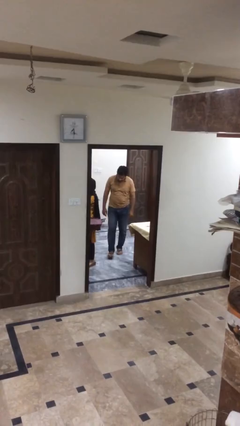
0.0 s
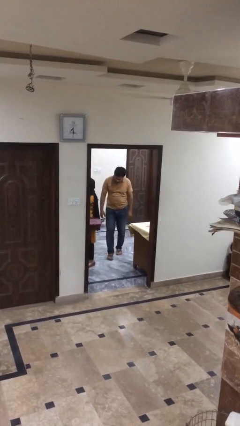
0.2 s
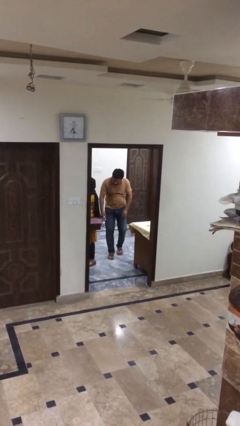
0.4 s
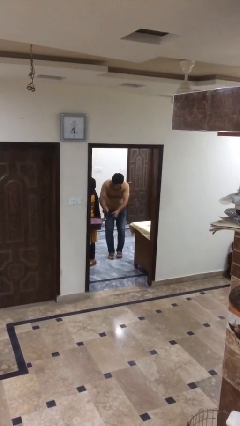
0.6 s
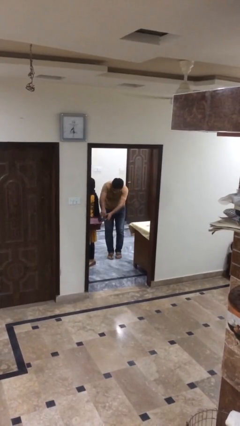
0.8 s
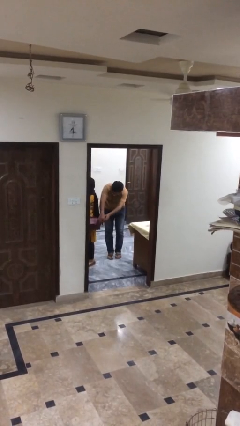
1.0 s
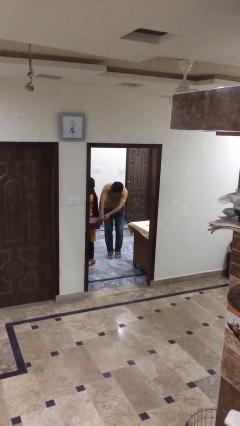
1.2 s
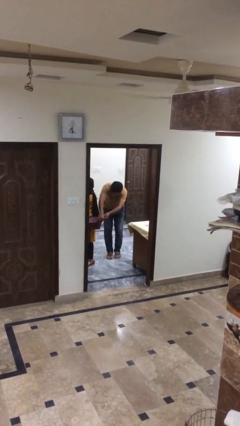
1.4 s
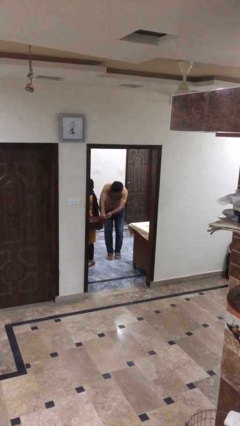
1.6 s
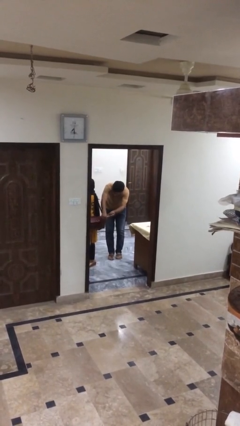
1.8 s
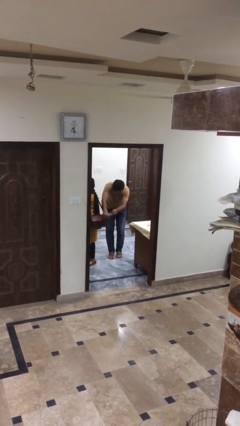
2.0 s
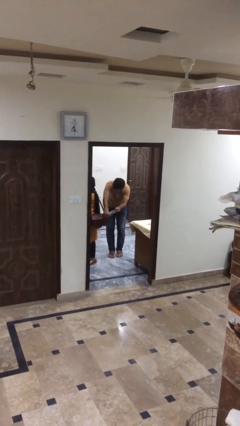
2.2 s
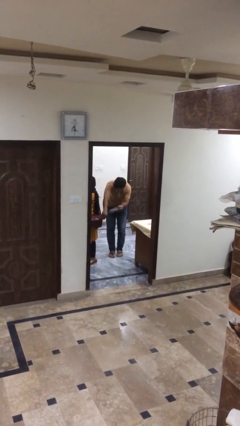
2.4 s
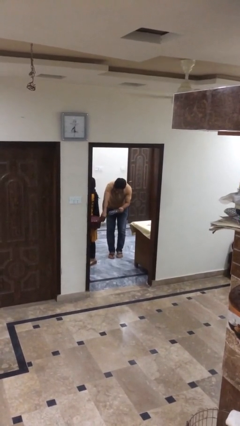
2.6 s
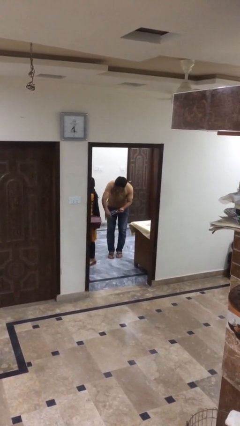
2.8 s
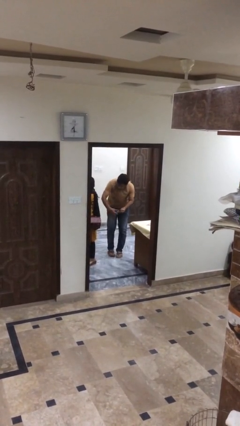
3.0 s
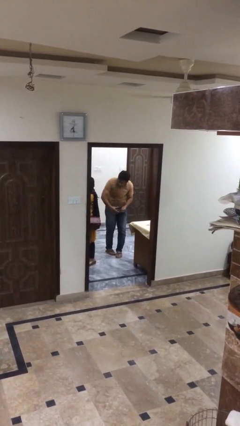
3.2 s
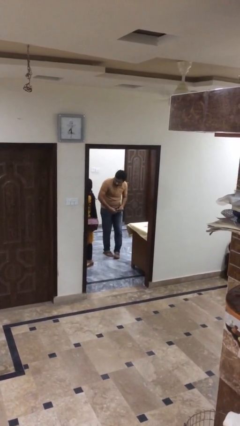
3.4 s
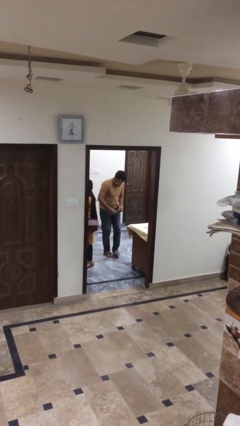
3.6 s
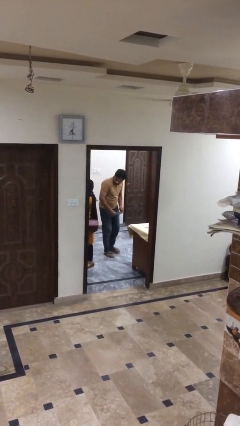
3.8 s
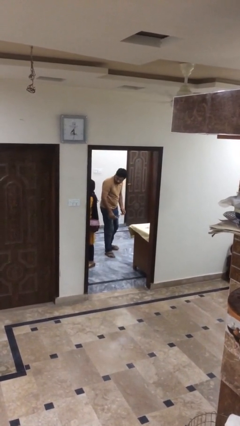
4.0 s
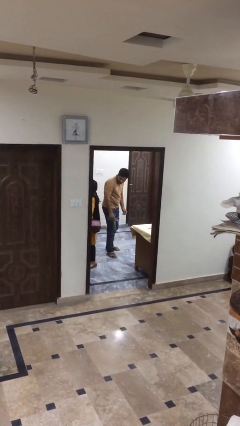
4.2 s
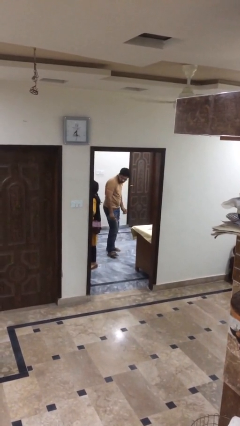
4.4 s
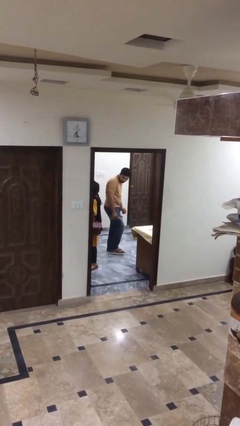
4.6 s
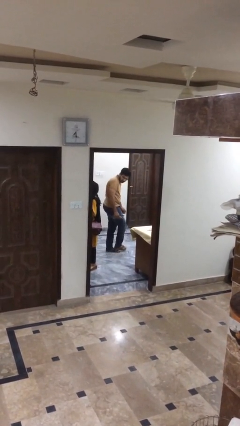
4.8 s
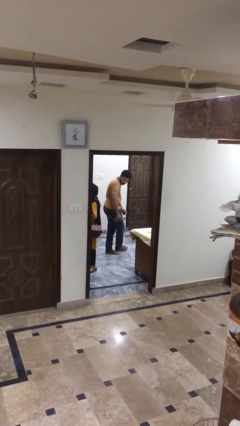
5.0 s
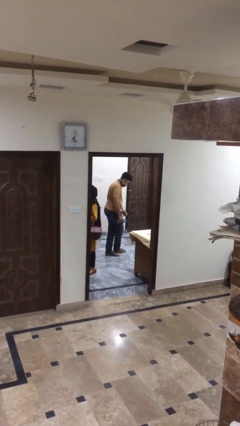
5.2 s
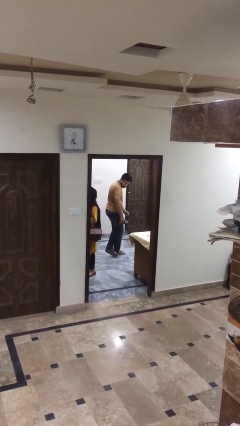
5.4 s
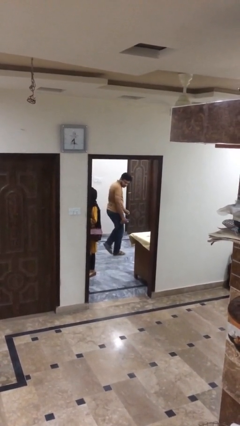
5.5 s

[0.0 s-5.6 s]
person steals object from person

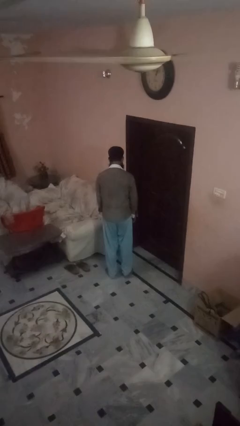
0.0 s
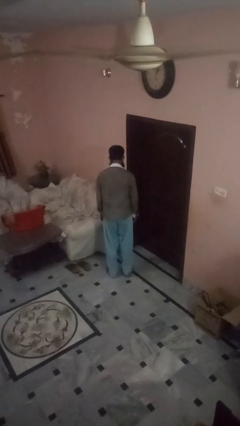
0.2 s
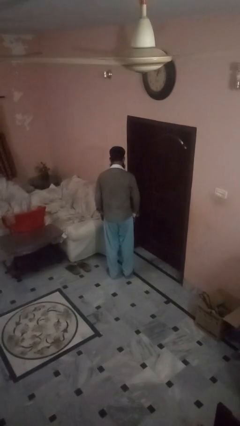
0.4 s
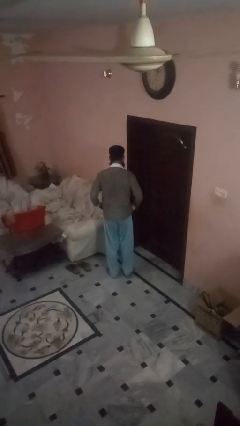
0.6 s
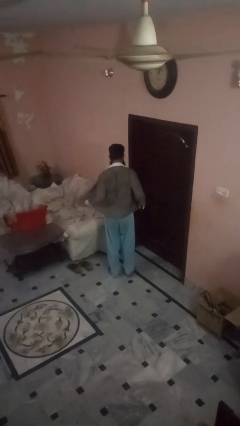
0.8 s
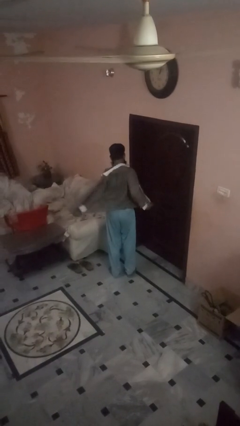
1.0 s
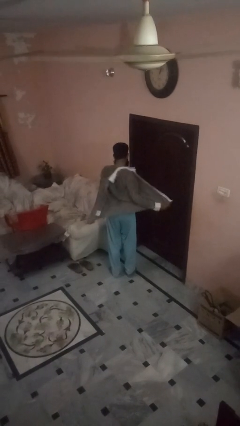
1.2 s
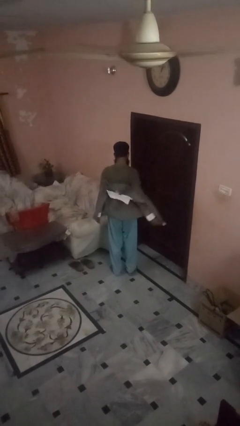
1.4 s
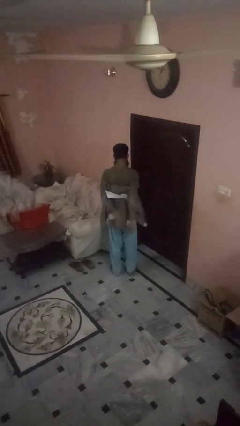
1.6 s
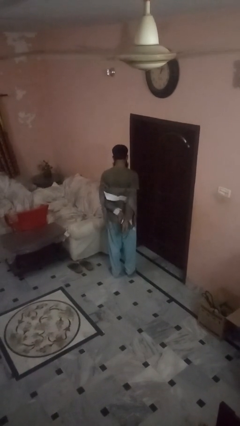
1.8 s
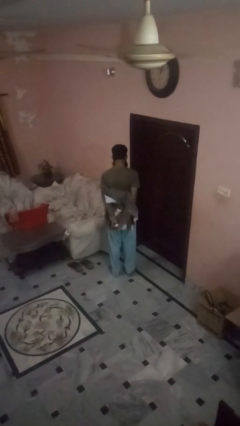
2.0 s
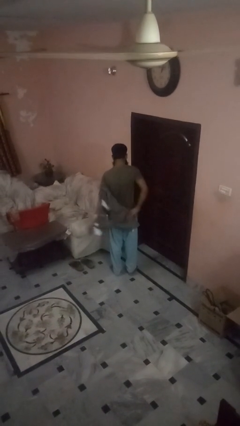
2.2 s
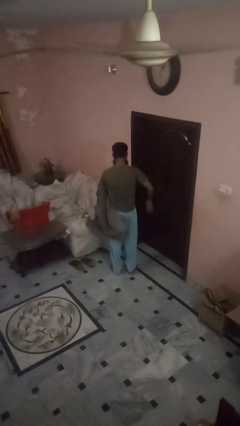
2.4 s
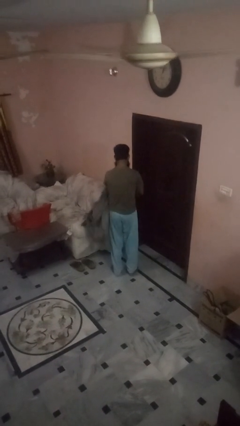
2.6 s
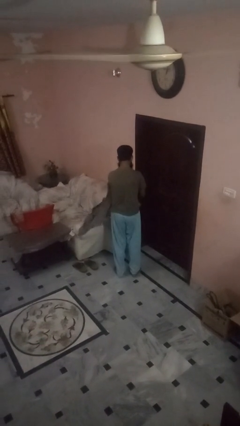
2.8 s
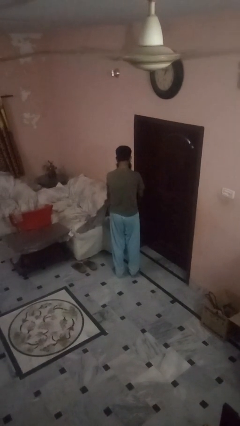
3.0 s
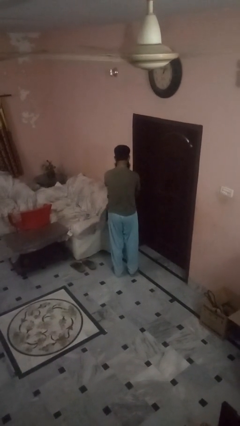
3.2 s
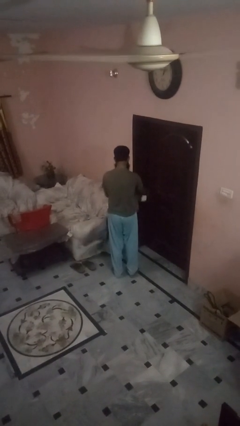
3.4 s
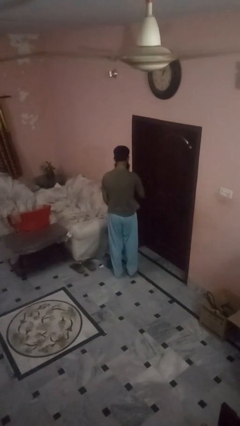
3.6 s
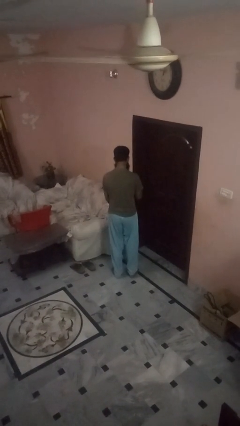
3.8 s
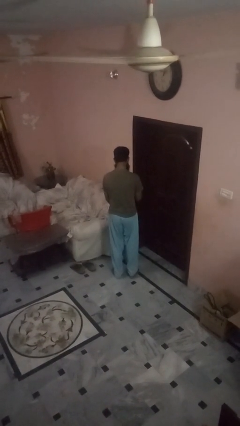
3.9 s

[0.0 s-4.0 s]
person takes off shirt

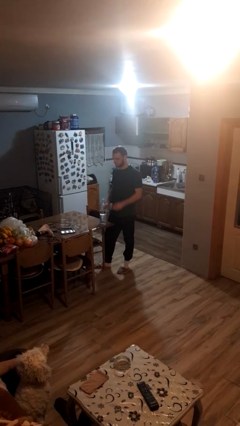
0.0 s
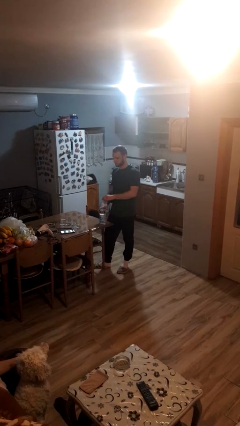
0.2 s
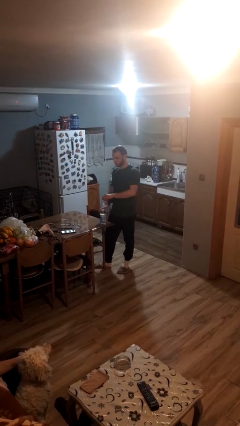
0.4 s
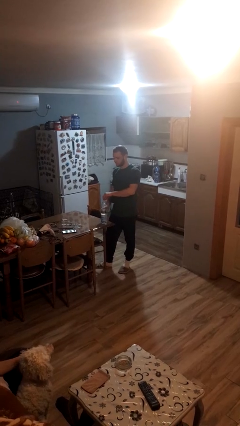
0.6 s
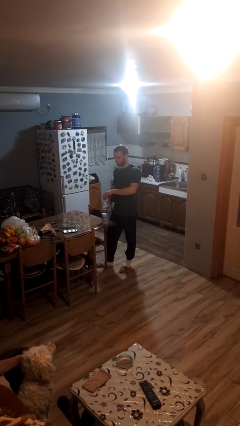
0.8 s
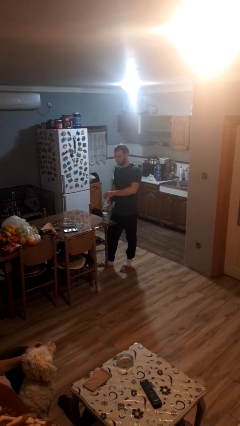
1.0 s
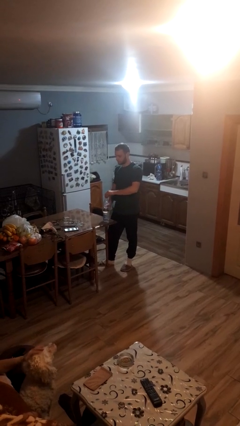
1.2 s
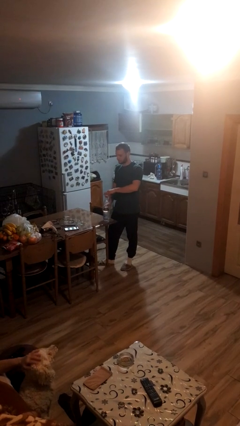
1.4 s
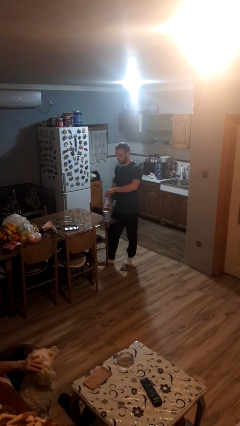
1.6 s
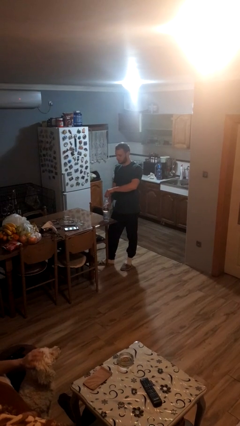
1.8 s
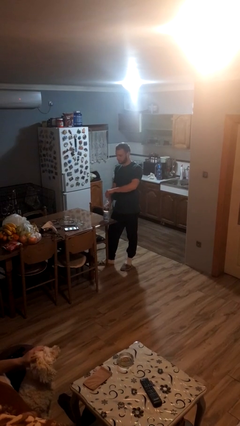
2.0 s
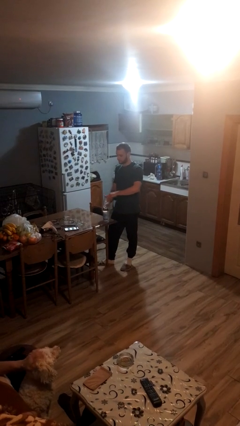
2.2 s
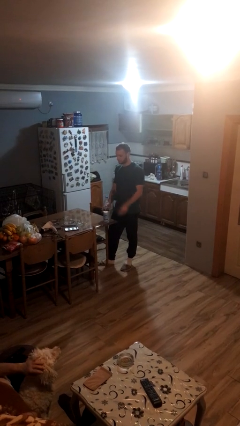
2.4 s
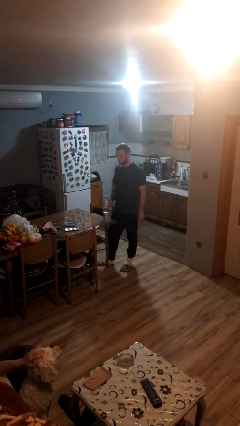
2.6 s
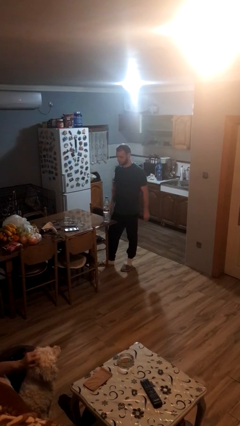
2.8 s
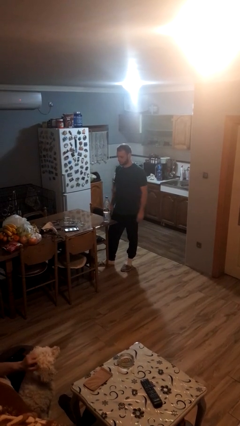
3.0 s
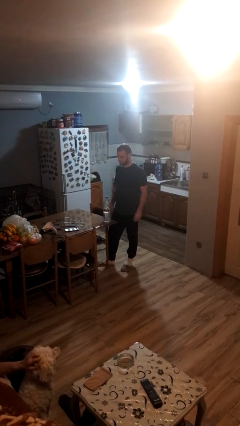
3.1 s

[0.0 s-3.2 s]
person screws lid to bottle

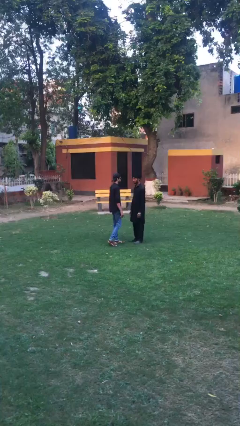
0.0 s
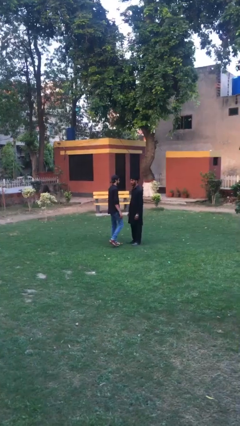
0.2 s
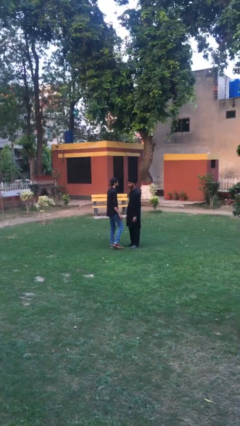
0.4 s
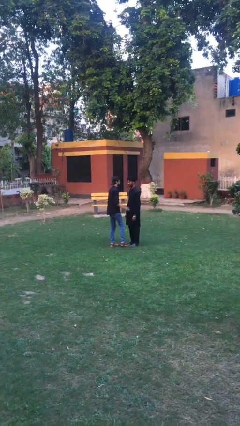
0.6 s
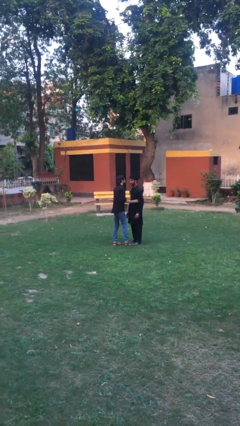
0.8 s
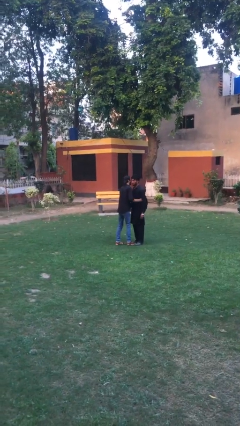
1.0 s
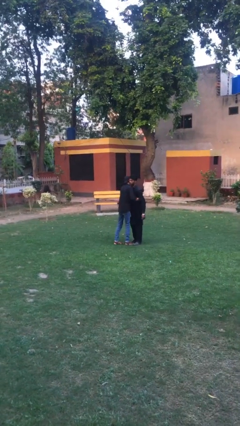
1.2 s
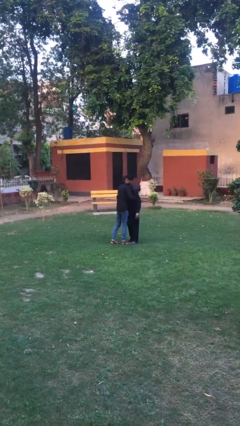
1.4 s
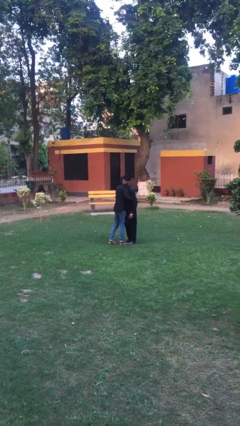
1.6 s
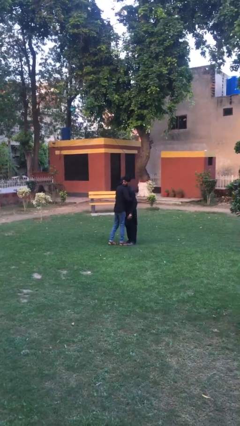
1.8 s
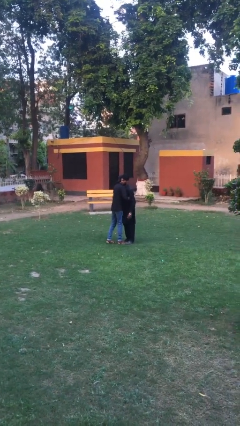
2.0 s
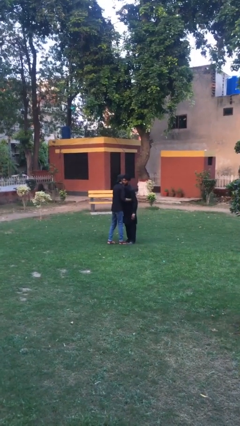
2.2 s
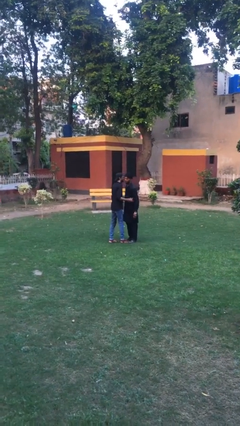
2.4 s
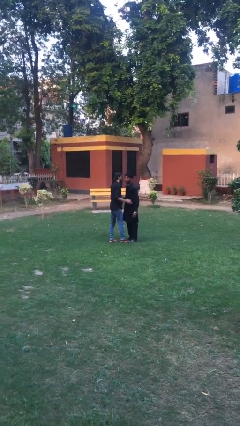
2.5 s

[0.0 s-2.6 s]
person embraces person

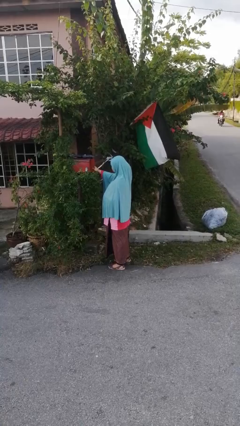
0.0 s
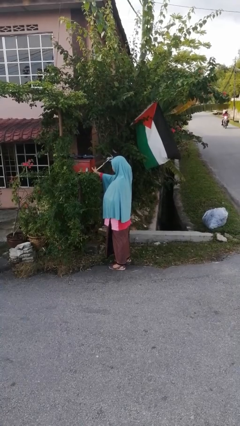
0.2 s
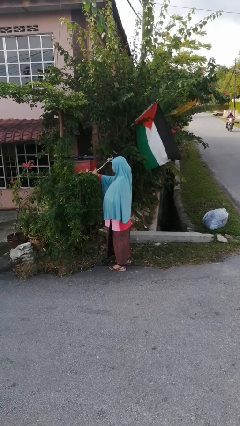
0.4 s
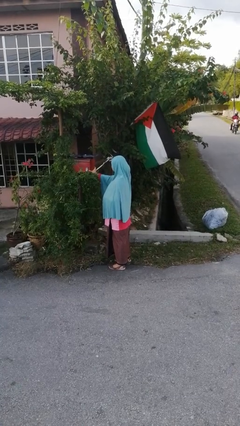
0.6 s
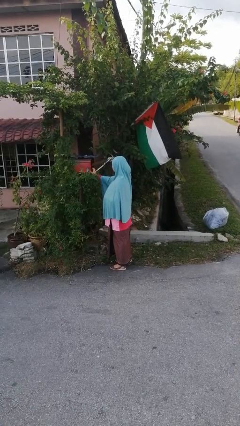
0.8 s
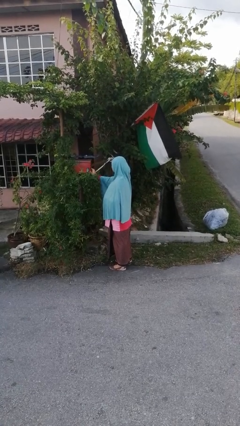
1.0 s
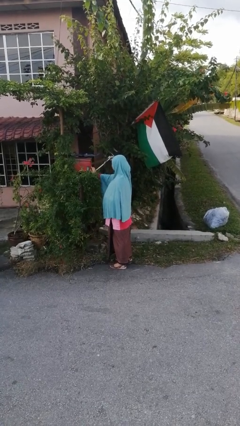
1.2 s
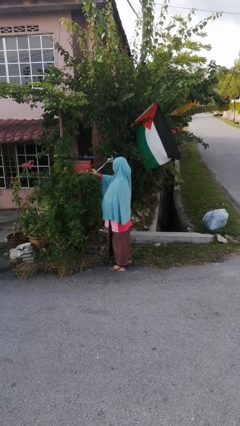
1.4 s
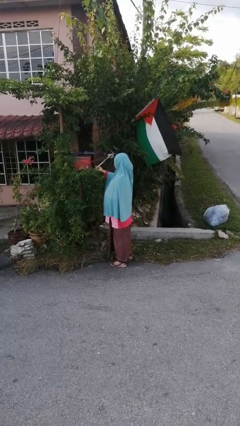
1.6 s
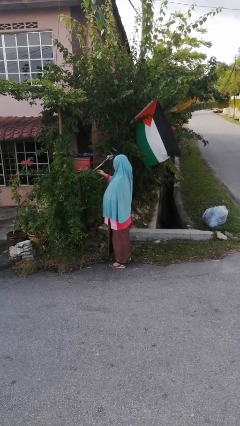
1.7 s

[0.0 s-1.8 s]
person closes mailbox

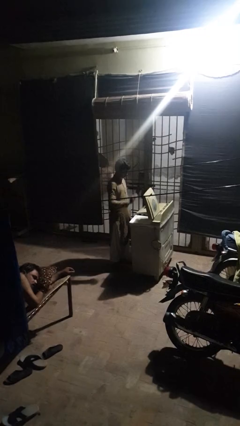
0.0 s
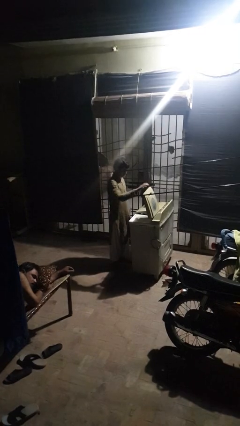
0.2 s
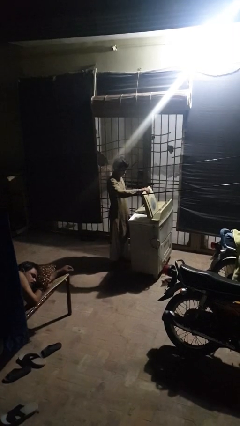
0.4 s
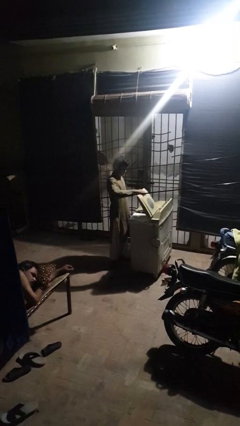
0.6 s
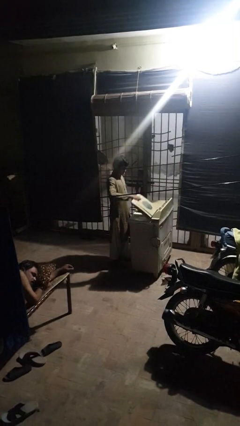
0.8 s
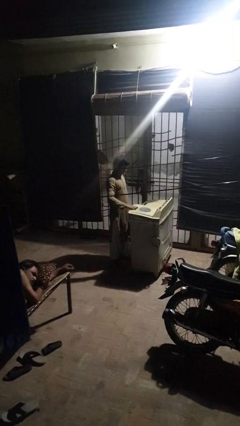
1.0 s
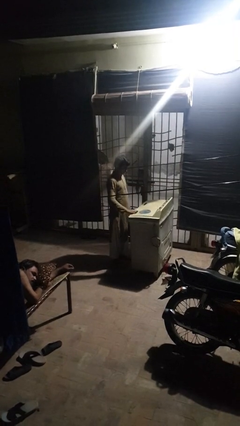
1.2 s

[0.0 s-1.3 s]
person closes clothes washer
